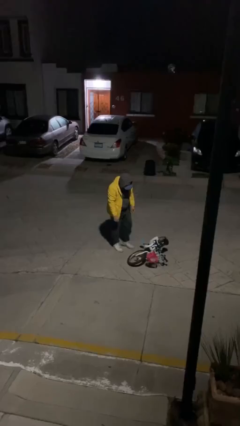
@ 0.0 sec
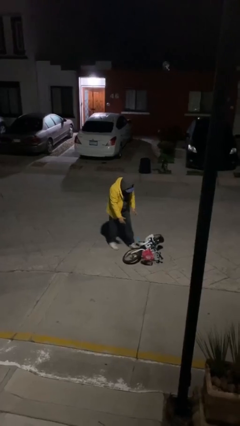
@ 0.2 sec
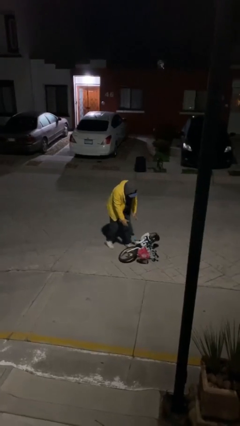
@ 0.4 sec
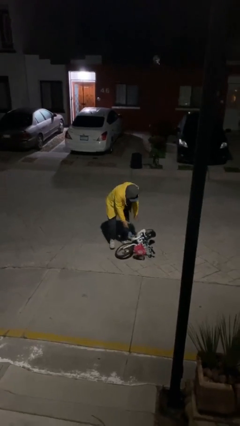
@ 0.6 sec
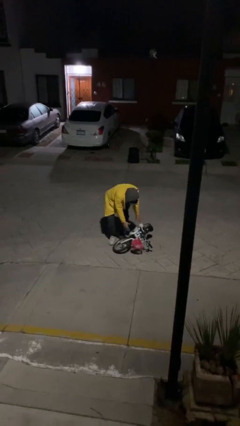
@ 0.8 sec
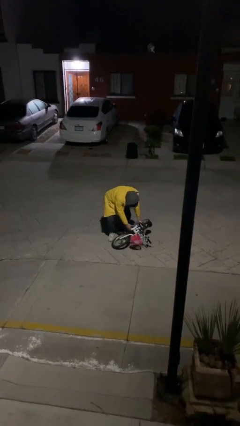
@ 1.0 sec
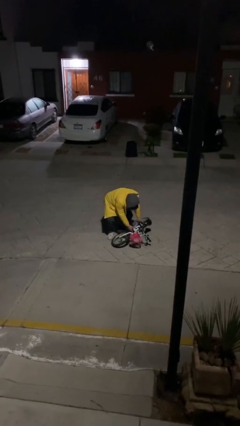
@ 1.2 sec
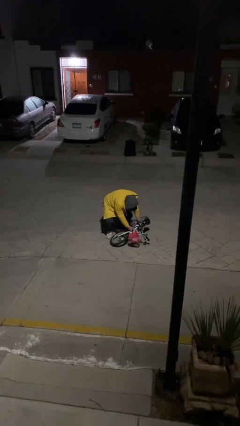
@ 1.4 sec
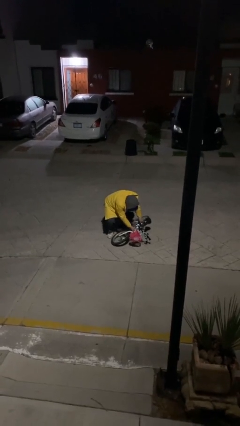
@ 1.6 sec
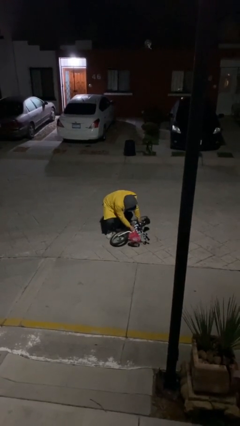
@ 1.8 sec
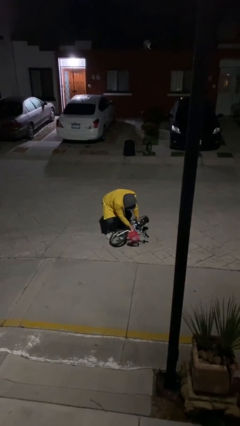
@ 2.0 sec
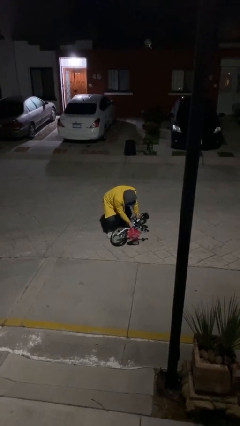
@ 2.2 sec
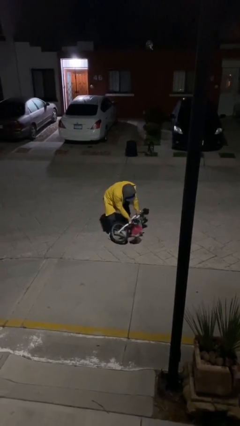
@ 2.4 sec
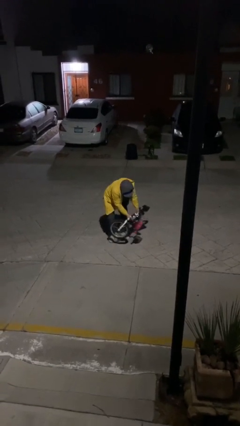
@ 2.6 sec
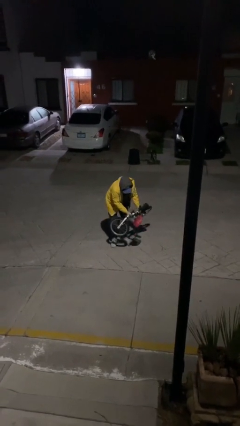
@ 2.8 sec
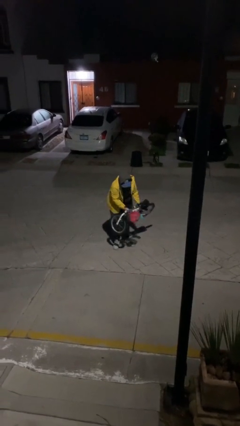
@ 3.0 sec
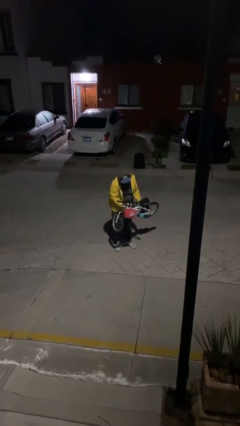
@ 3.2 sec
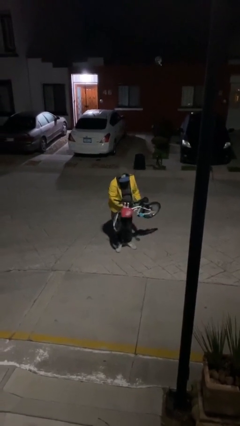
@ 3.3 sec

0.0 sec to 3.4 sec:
person picks up object from floor

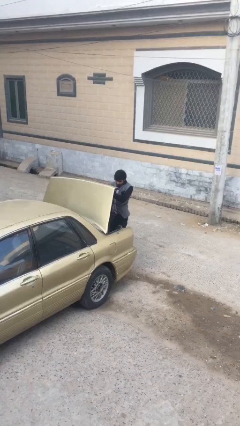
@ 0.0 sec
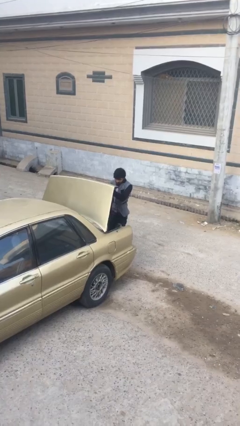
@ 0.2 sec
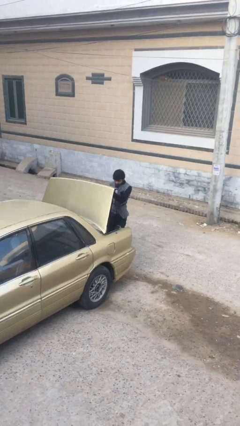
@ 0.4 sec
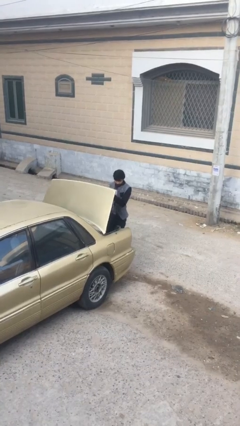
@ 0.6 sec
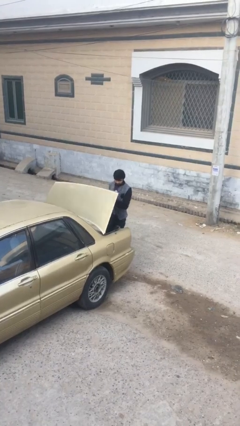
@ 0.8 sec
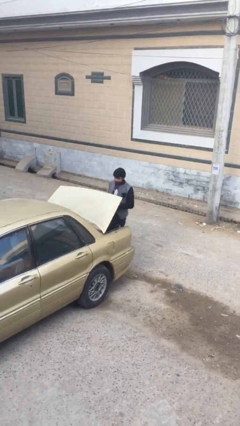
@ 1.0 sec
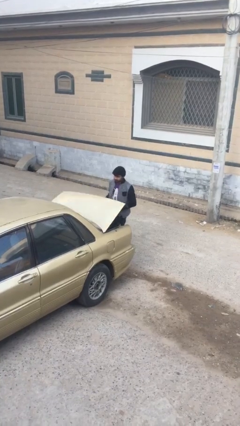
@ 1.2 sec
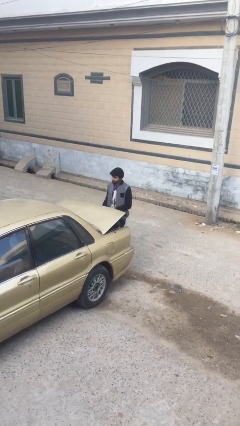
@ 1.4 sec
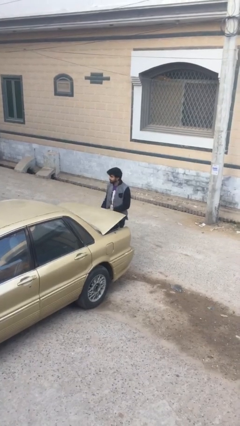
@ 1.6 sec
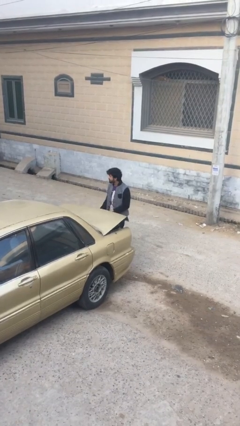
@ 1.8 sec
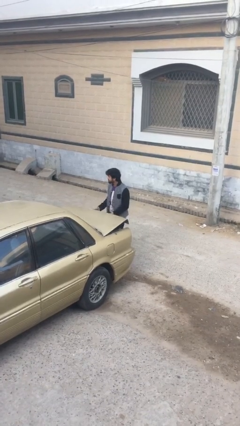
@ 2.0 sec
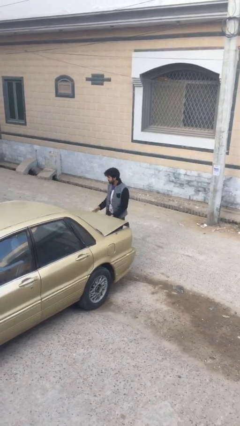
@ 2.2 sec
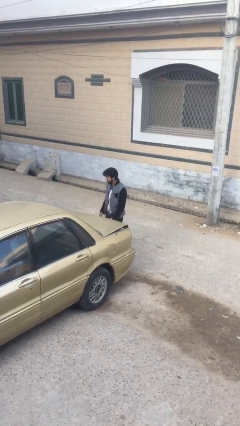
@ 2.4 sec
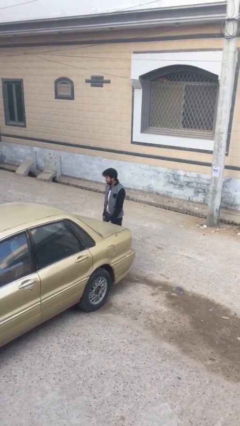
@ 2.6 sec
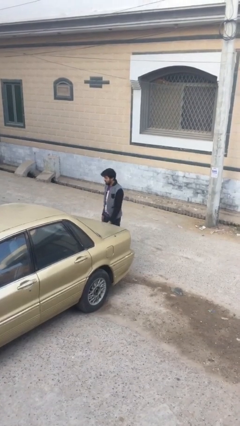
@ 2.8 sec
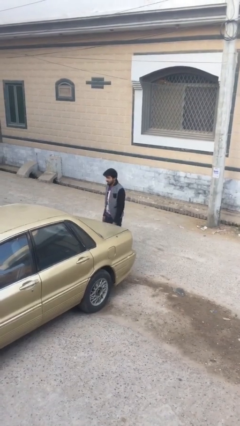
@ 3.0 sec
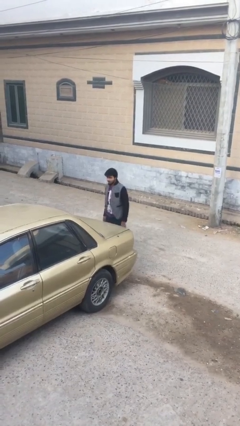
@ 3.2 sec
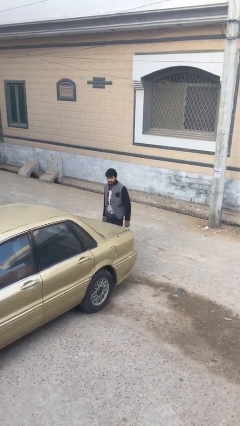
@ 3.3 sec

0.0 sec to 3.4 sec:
person closes car trunk

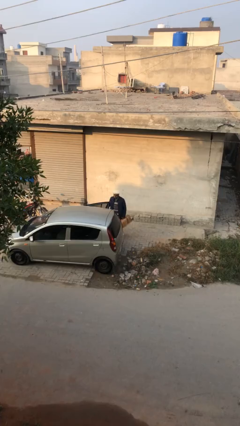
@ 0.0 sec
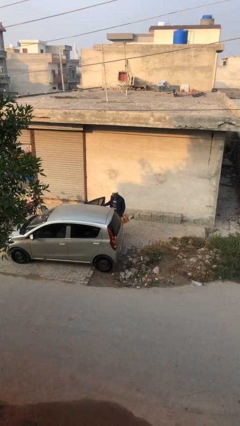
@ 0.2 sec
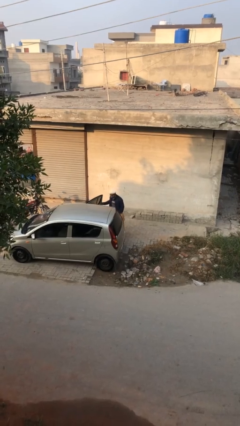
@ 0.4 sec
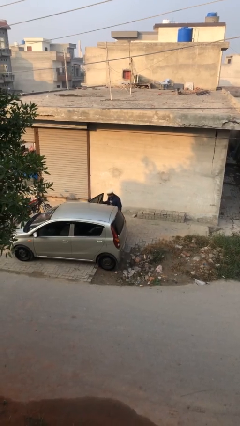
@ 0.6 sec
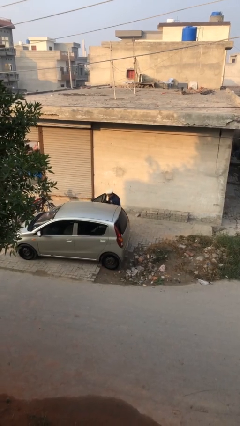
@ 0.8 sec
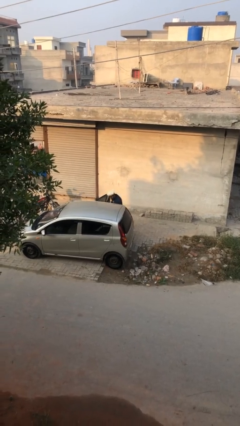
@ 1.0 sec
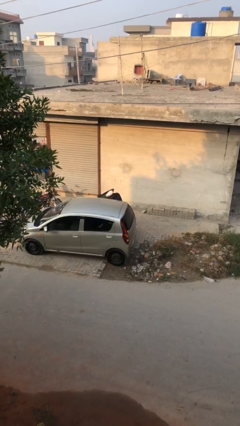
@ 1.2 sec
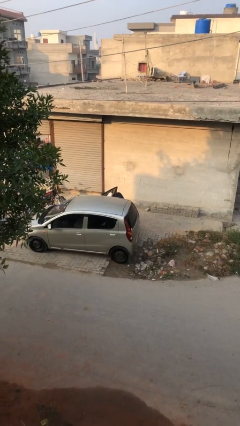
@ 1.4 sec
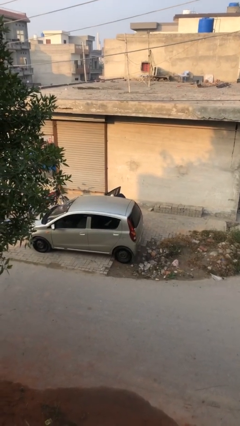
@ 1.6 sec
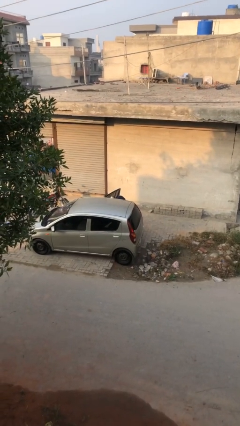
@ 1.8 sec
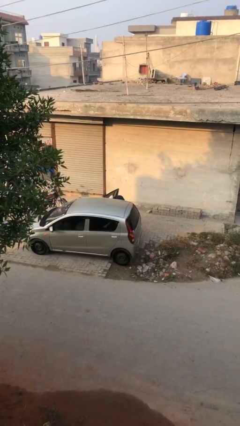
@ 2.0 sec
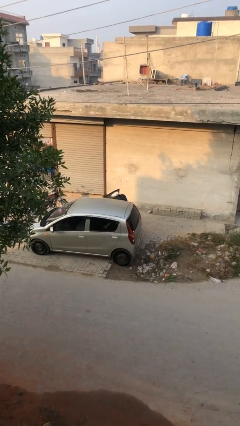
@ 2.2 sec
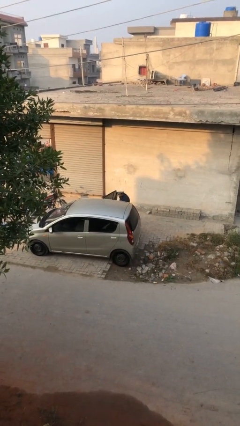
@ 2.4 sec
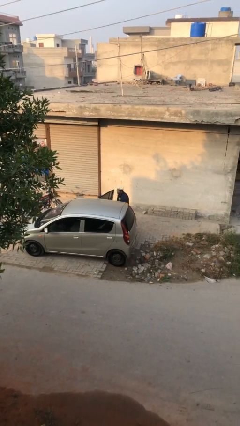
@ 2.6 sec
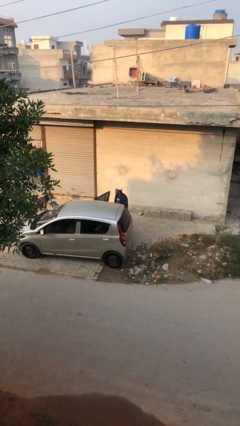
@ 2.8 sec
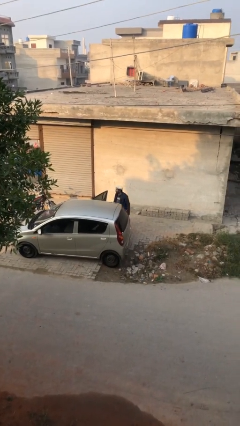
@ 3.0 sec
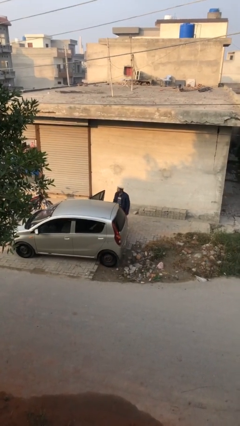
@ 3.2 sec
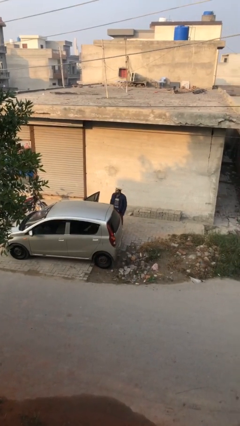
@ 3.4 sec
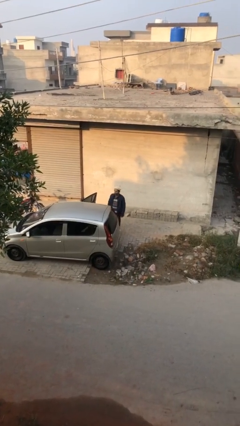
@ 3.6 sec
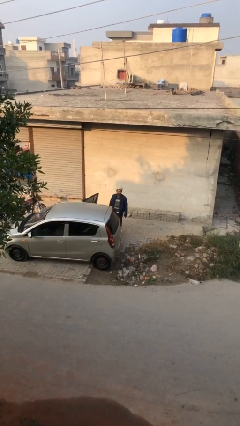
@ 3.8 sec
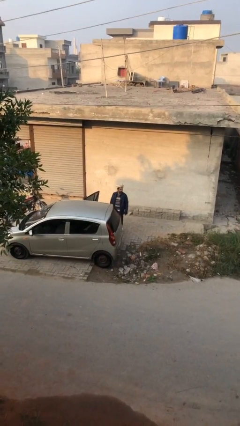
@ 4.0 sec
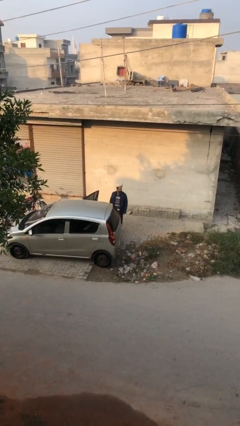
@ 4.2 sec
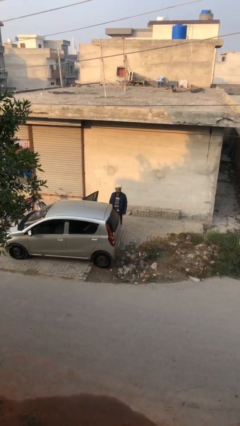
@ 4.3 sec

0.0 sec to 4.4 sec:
person loads car

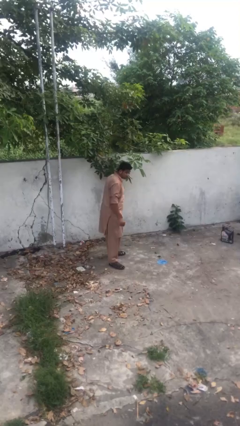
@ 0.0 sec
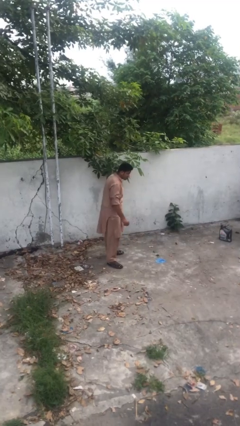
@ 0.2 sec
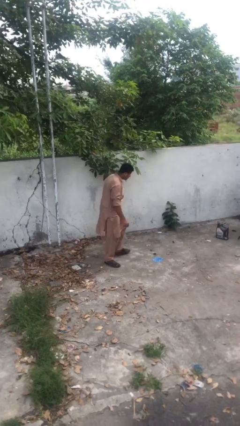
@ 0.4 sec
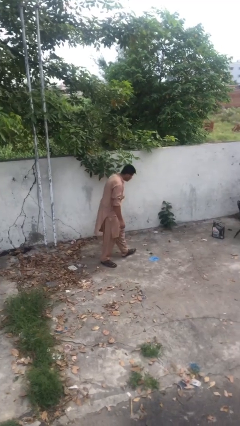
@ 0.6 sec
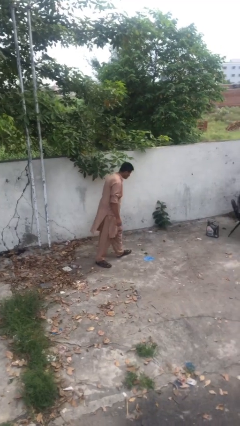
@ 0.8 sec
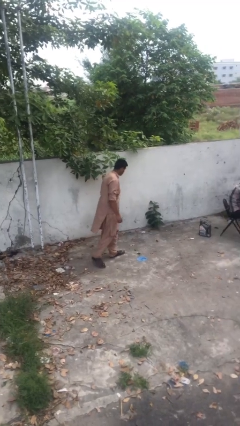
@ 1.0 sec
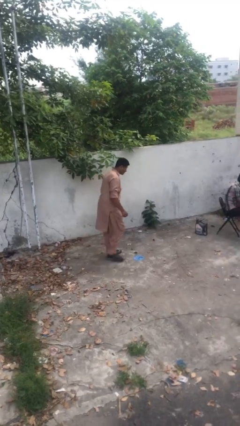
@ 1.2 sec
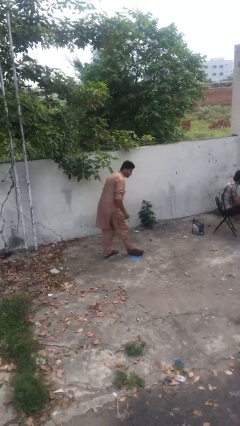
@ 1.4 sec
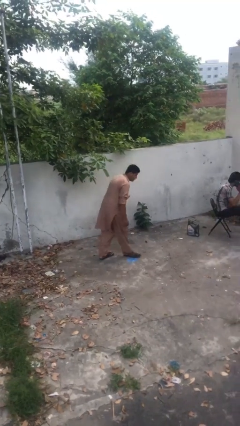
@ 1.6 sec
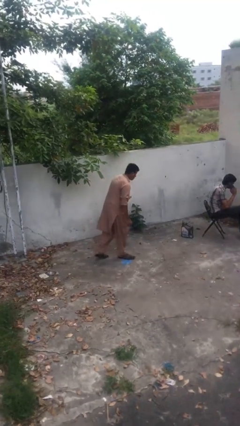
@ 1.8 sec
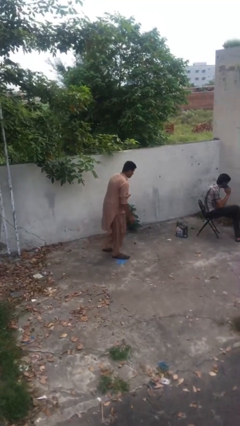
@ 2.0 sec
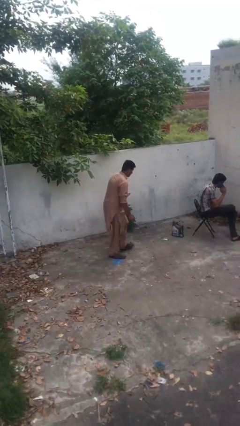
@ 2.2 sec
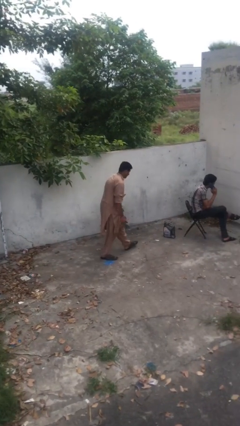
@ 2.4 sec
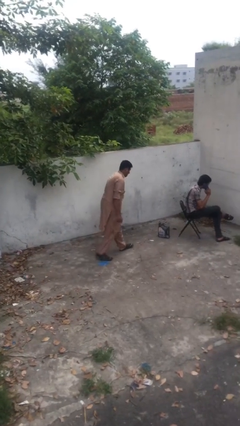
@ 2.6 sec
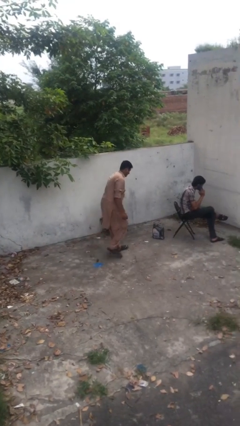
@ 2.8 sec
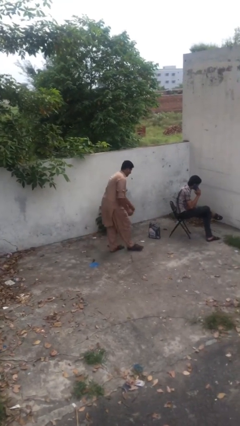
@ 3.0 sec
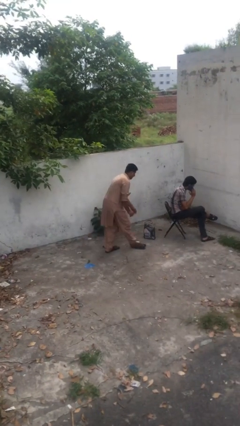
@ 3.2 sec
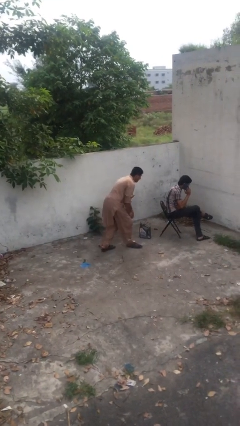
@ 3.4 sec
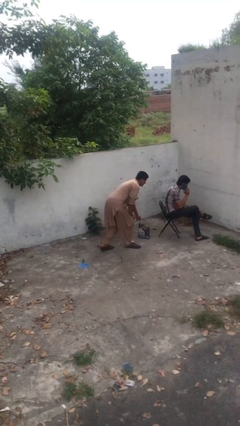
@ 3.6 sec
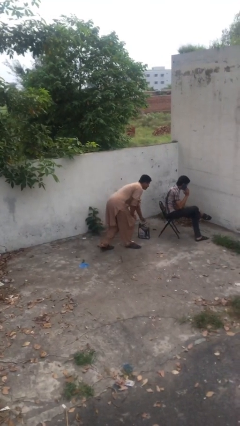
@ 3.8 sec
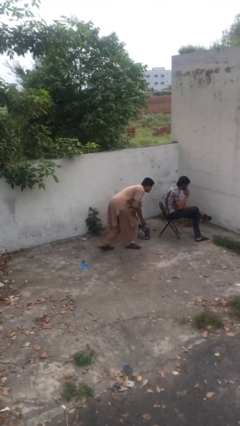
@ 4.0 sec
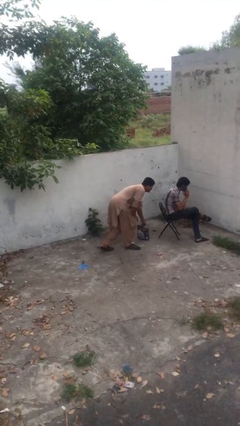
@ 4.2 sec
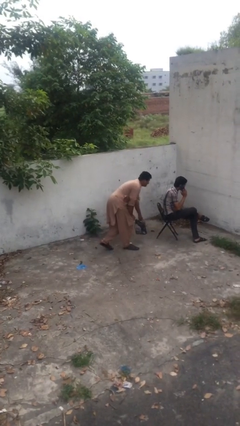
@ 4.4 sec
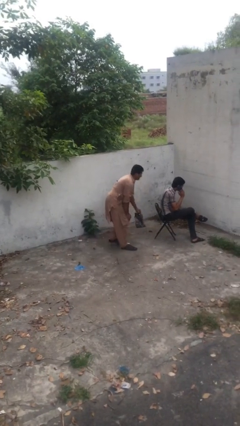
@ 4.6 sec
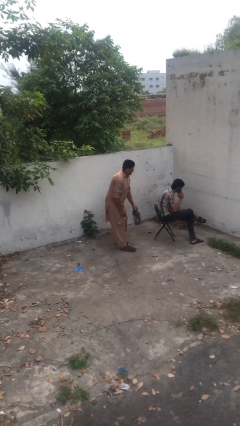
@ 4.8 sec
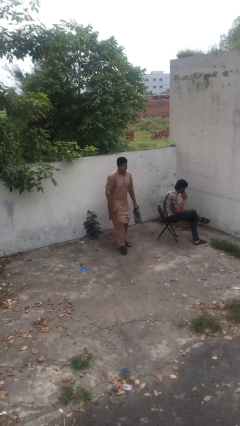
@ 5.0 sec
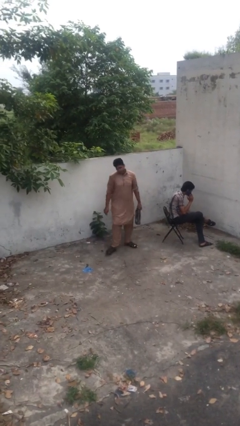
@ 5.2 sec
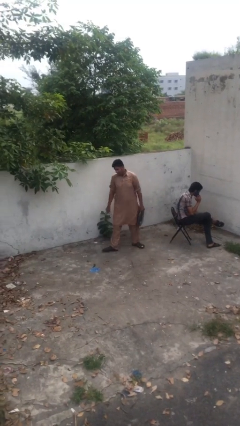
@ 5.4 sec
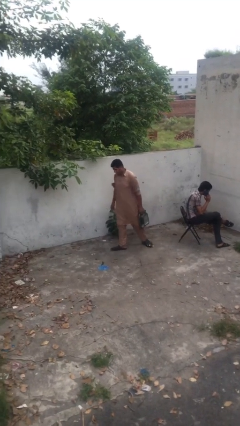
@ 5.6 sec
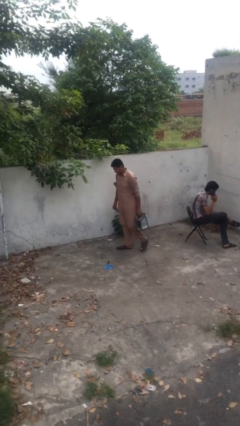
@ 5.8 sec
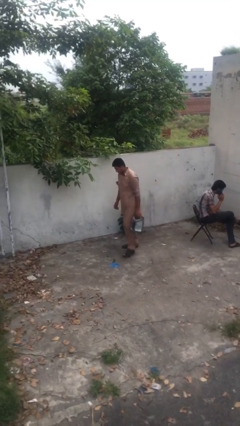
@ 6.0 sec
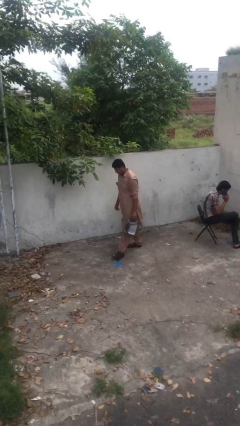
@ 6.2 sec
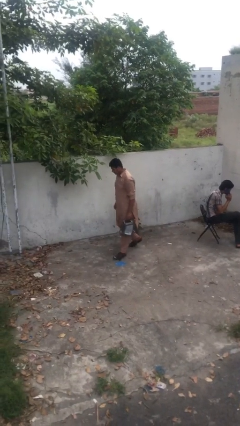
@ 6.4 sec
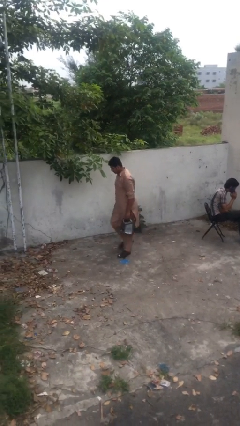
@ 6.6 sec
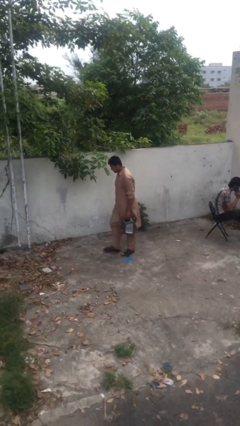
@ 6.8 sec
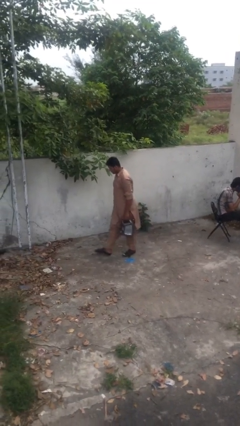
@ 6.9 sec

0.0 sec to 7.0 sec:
person steals object from person
